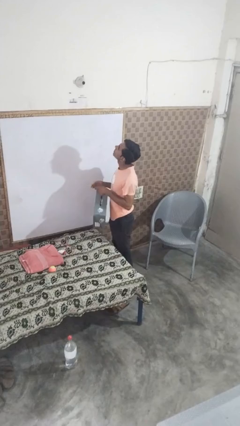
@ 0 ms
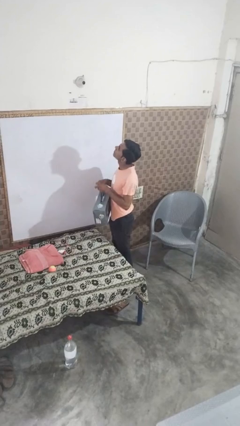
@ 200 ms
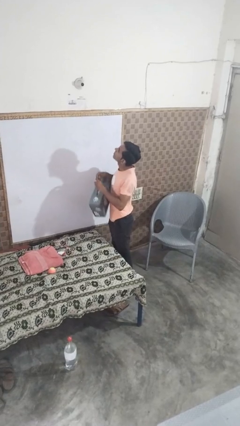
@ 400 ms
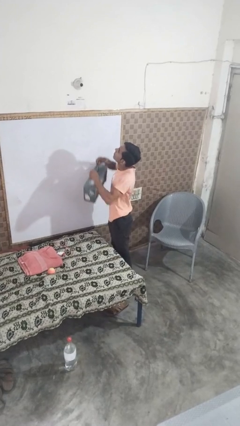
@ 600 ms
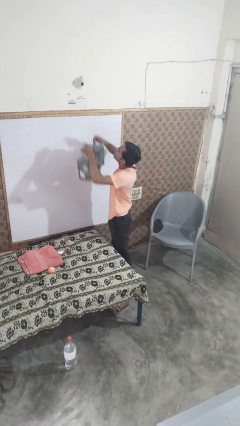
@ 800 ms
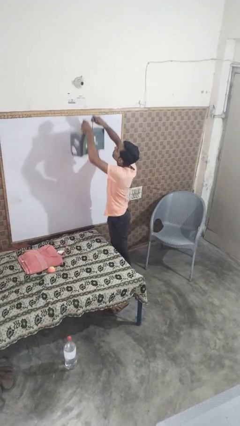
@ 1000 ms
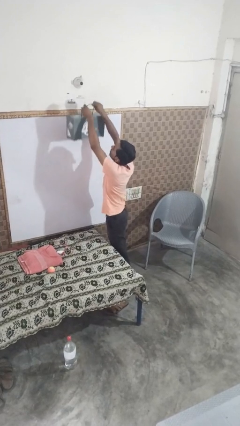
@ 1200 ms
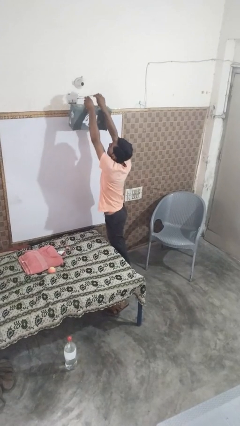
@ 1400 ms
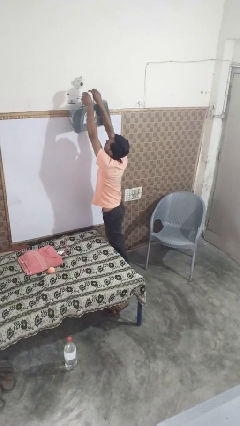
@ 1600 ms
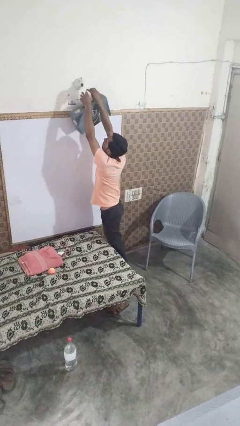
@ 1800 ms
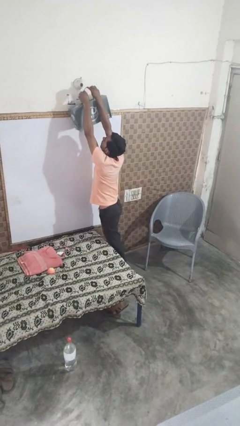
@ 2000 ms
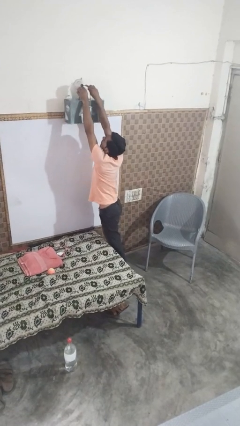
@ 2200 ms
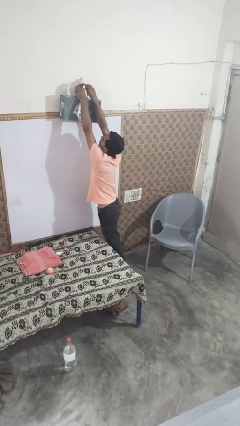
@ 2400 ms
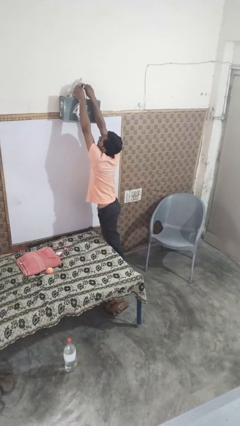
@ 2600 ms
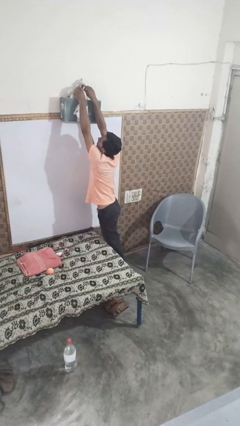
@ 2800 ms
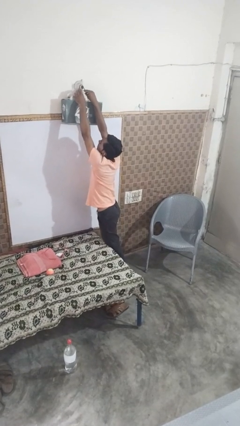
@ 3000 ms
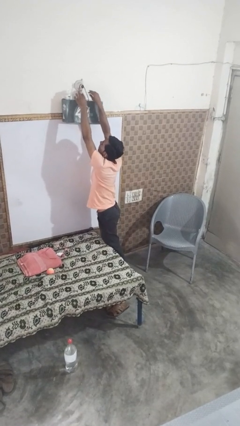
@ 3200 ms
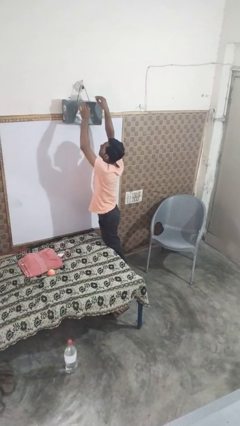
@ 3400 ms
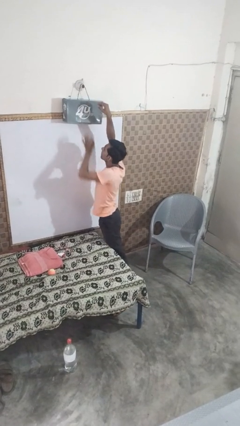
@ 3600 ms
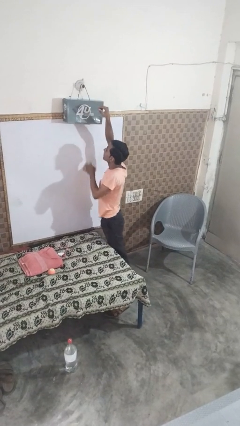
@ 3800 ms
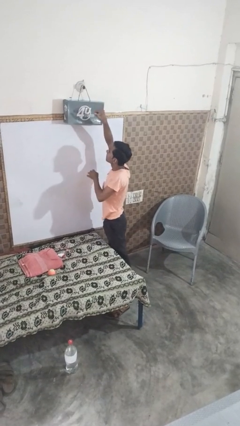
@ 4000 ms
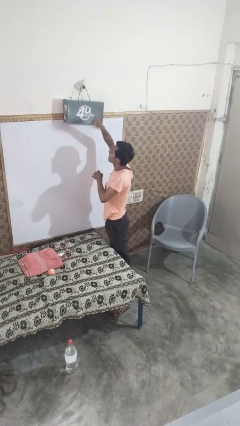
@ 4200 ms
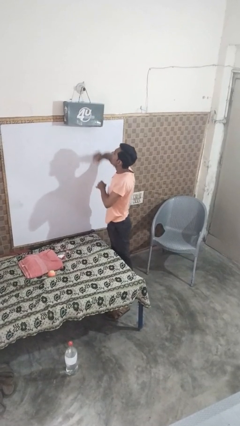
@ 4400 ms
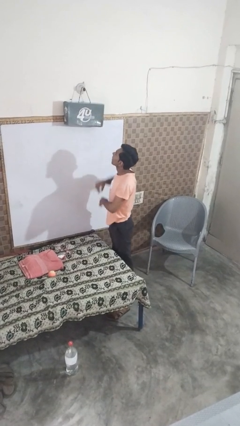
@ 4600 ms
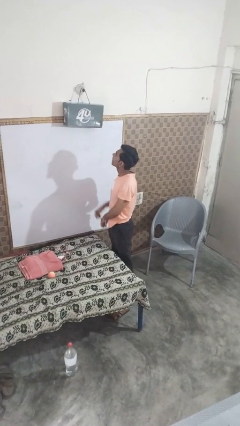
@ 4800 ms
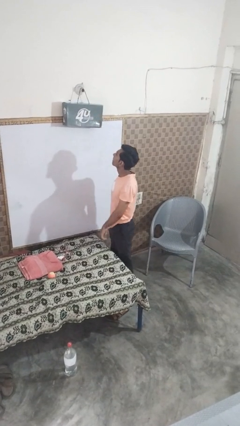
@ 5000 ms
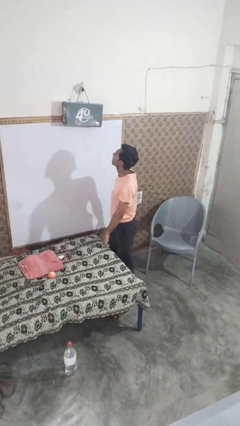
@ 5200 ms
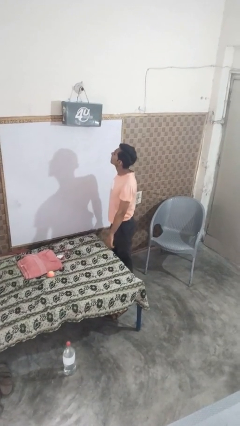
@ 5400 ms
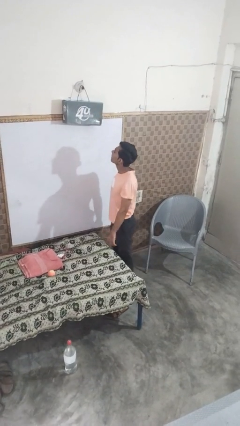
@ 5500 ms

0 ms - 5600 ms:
person puts up smoke detector

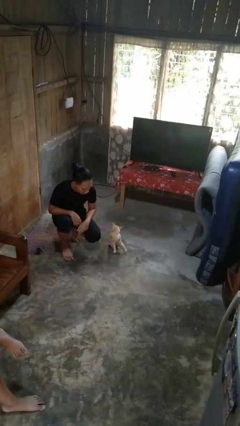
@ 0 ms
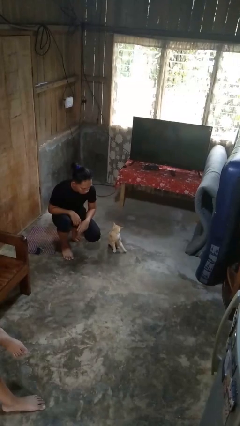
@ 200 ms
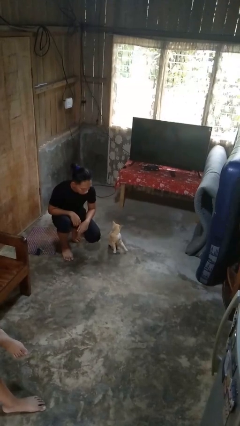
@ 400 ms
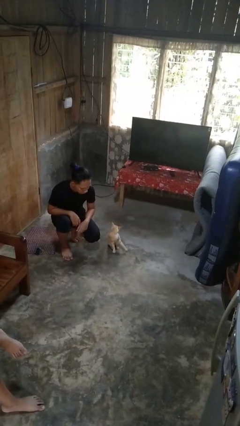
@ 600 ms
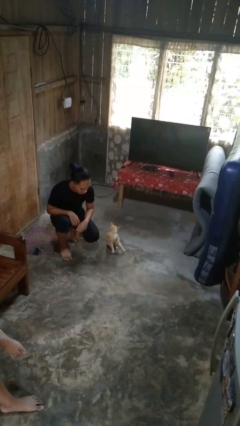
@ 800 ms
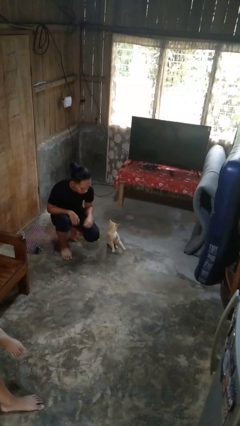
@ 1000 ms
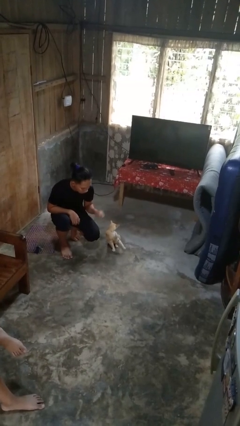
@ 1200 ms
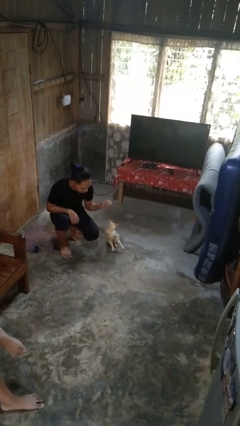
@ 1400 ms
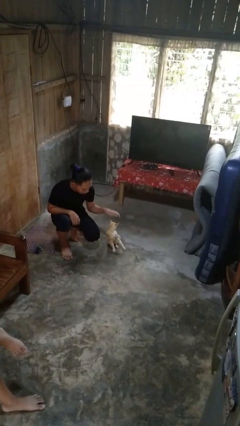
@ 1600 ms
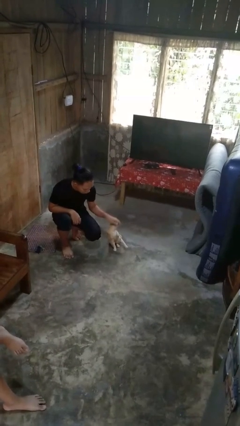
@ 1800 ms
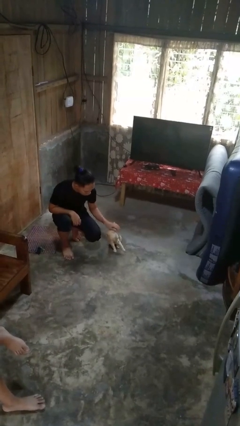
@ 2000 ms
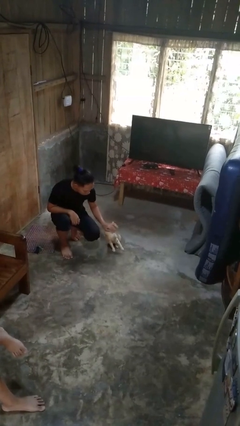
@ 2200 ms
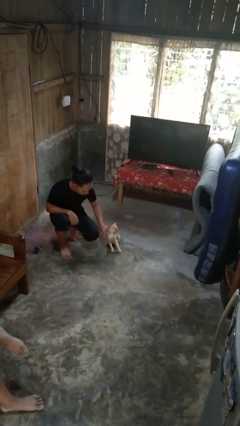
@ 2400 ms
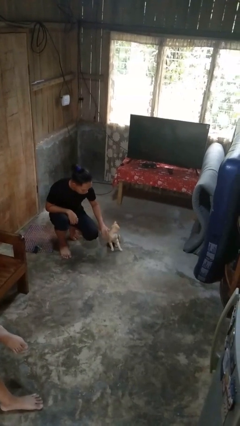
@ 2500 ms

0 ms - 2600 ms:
person pets cat

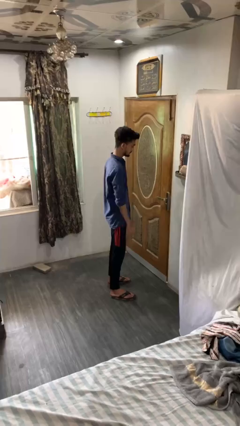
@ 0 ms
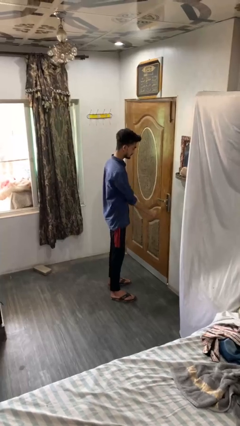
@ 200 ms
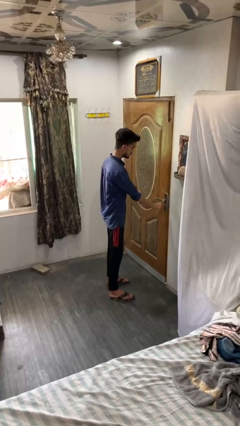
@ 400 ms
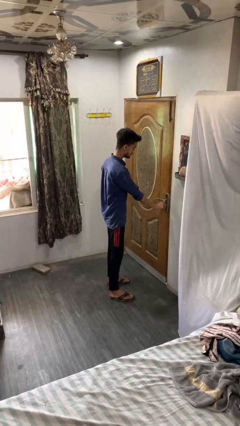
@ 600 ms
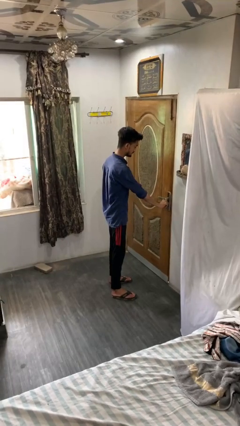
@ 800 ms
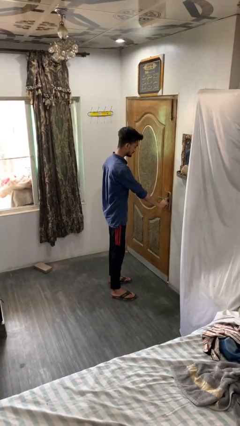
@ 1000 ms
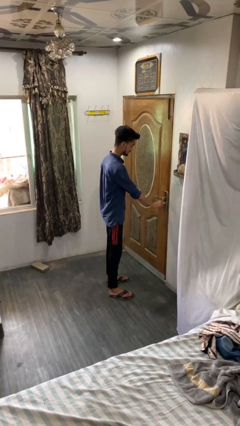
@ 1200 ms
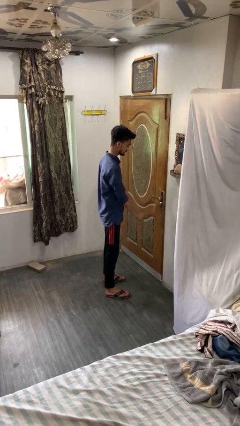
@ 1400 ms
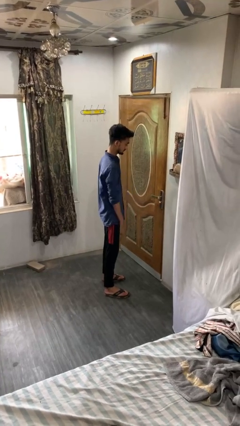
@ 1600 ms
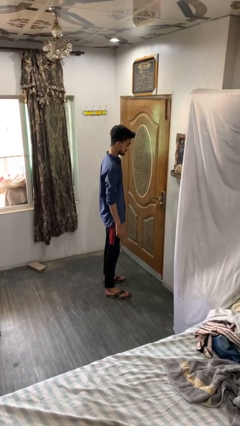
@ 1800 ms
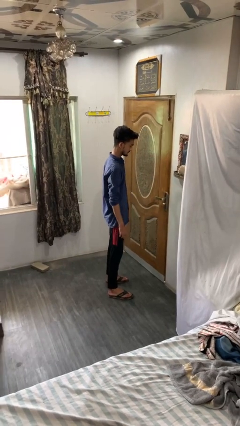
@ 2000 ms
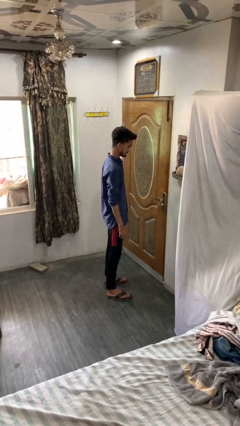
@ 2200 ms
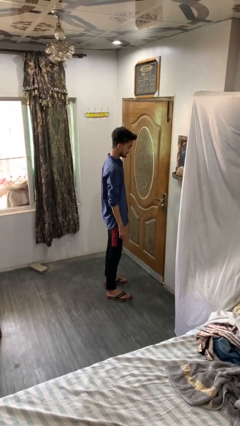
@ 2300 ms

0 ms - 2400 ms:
person unlocks door with keys

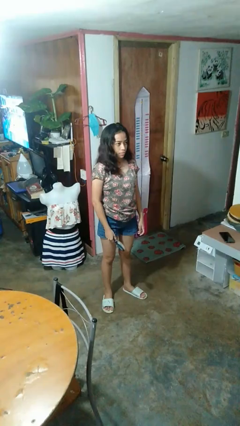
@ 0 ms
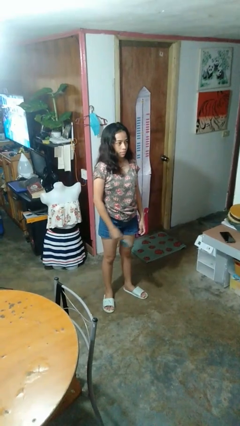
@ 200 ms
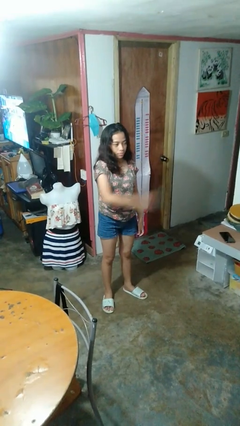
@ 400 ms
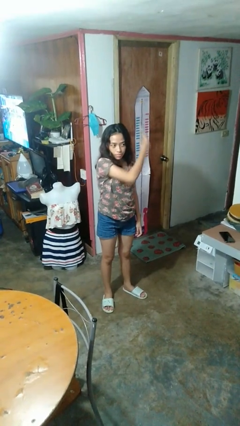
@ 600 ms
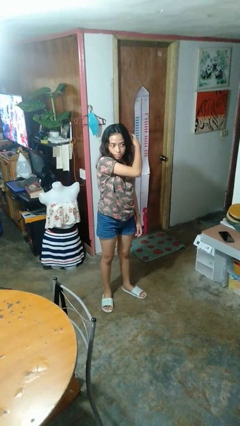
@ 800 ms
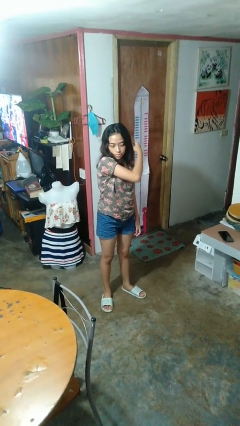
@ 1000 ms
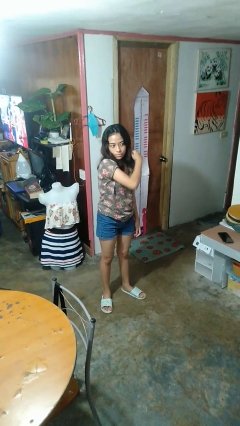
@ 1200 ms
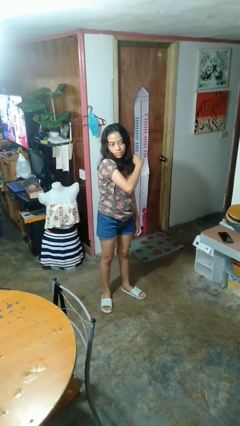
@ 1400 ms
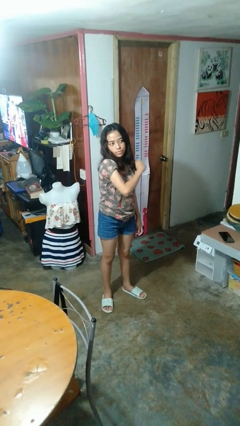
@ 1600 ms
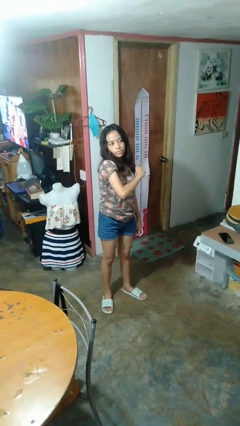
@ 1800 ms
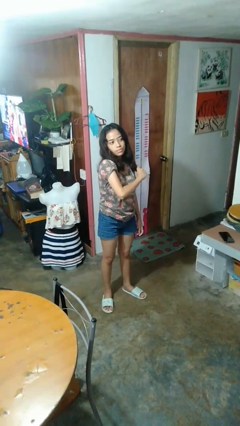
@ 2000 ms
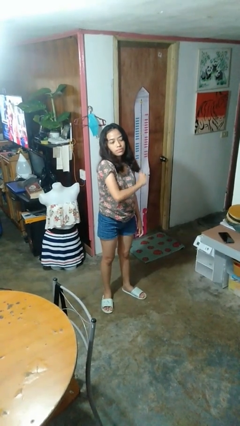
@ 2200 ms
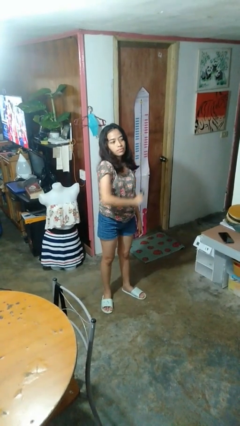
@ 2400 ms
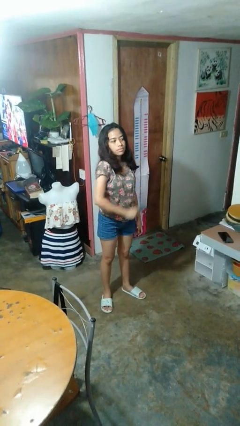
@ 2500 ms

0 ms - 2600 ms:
person brushes hair

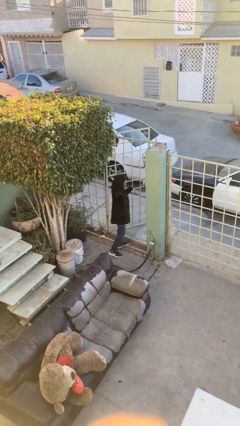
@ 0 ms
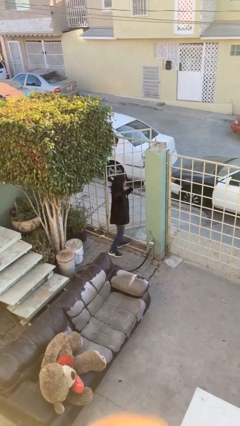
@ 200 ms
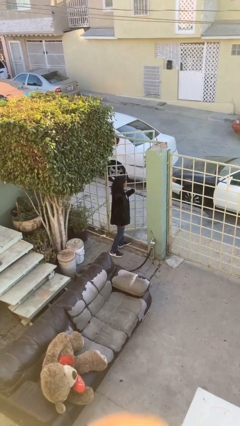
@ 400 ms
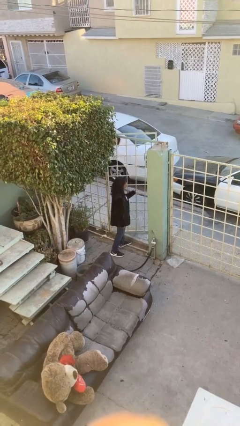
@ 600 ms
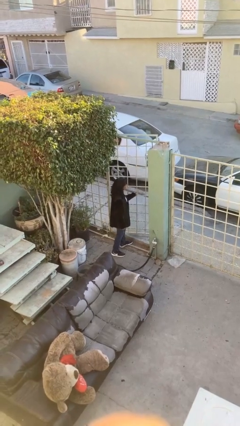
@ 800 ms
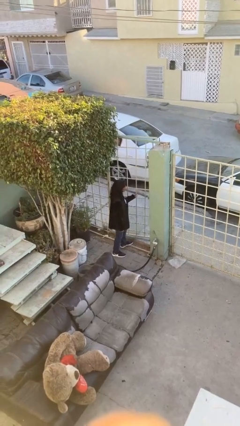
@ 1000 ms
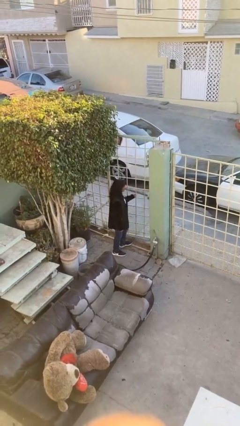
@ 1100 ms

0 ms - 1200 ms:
person closes facility door

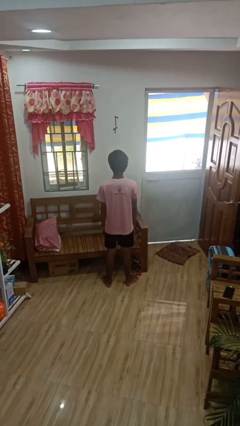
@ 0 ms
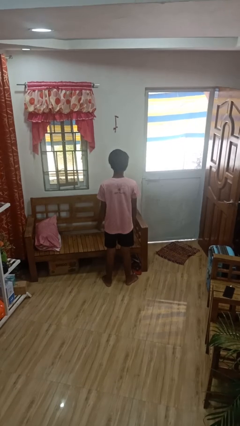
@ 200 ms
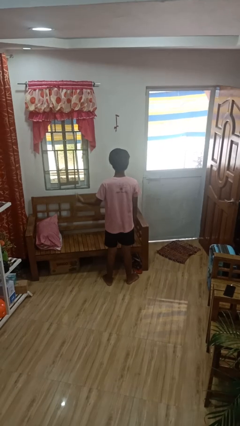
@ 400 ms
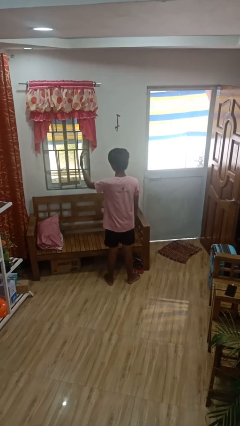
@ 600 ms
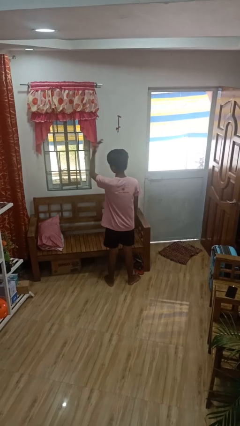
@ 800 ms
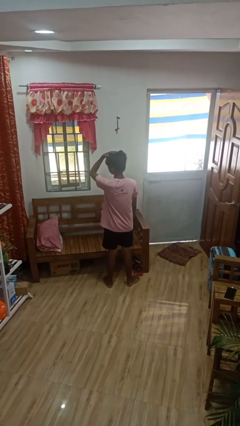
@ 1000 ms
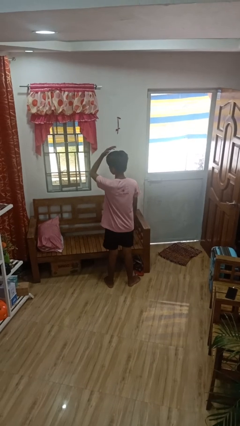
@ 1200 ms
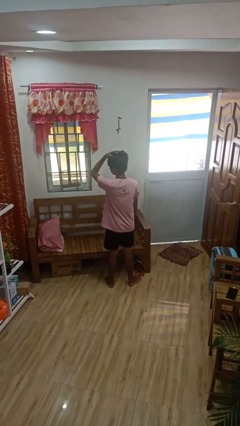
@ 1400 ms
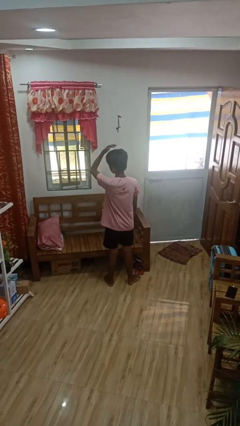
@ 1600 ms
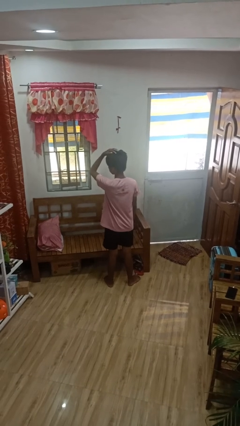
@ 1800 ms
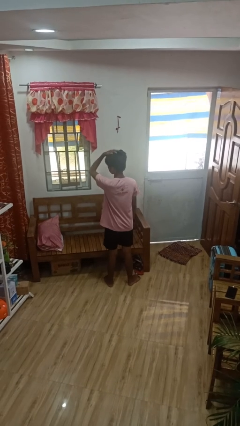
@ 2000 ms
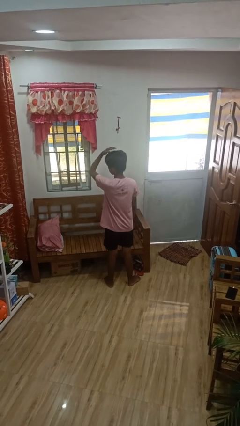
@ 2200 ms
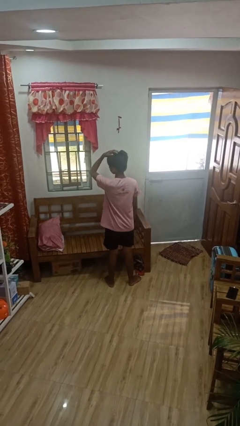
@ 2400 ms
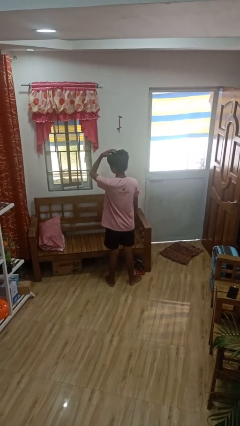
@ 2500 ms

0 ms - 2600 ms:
person pats head
